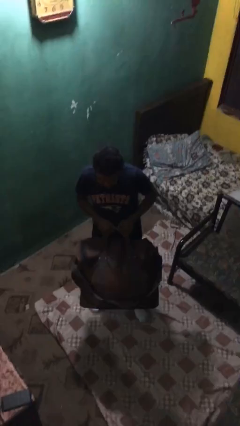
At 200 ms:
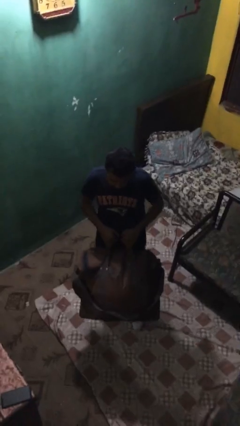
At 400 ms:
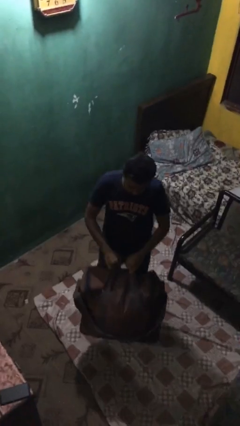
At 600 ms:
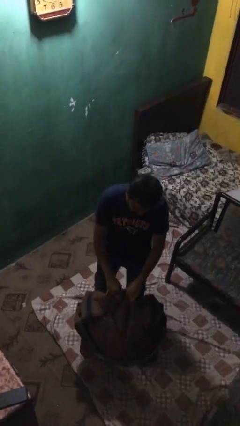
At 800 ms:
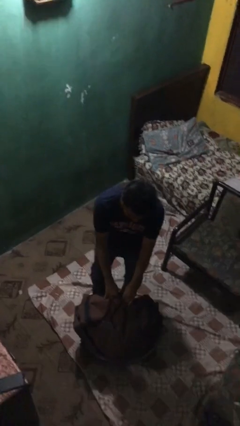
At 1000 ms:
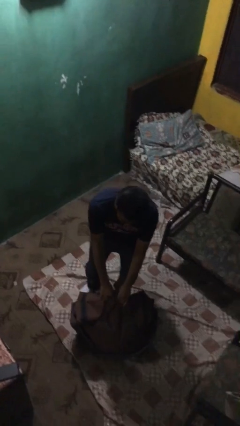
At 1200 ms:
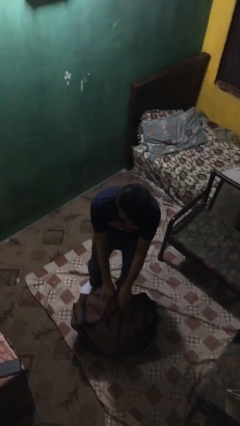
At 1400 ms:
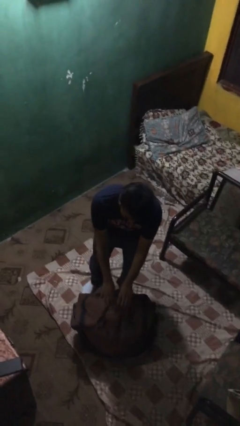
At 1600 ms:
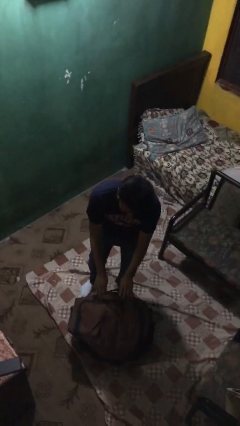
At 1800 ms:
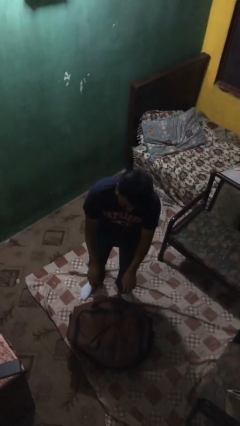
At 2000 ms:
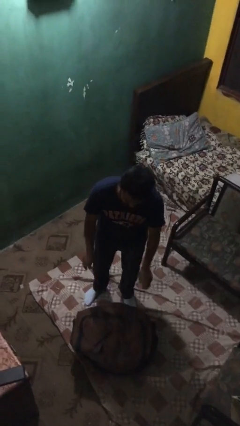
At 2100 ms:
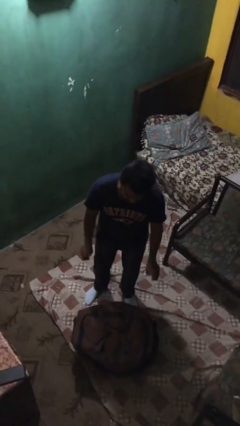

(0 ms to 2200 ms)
person puts down object on floor

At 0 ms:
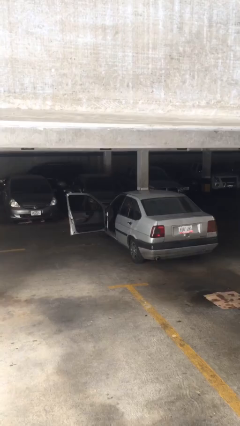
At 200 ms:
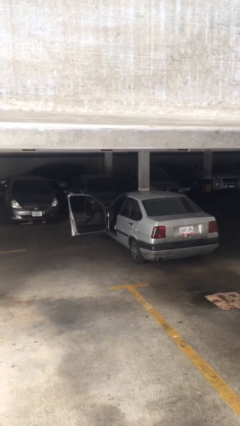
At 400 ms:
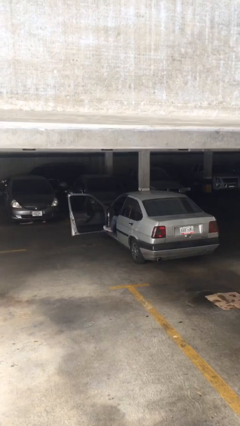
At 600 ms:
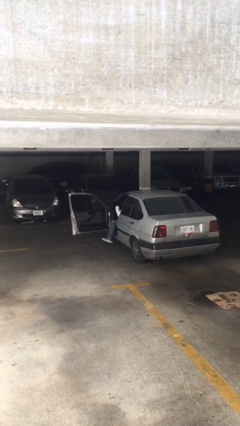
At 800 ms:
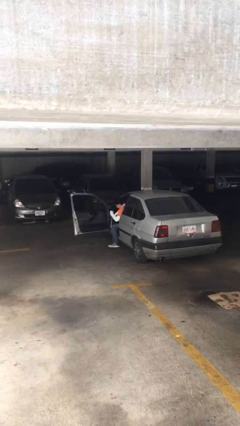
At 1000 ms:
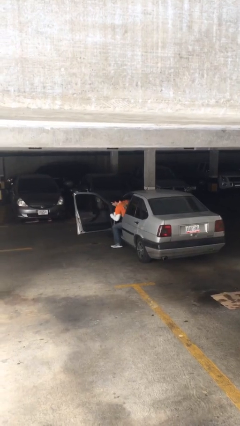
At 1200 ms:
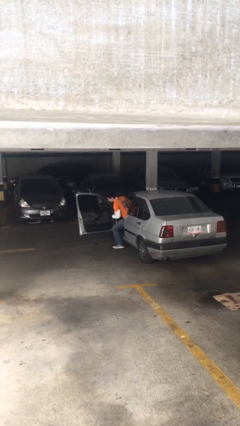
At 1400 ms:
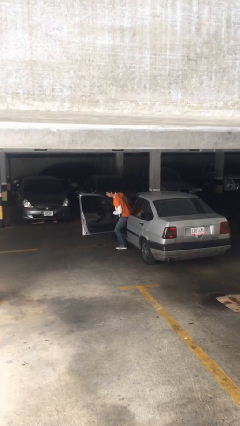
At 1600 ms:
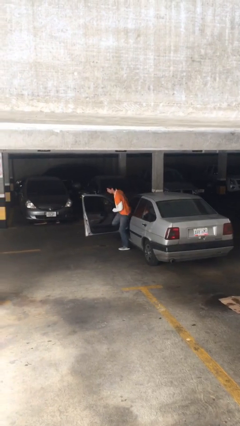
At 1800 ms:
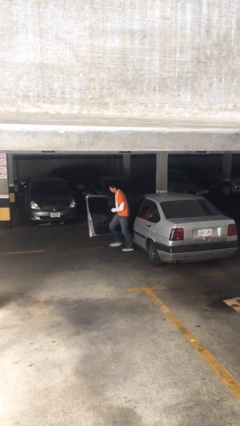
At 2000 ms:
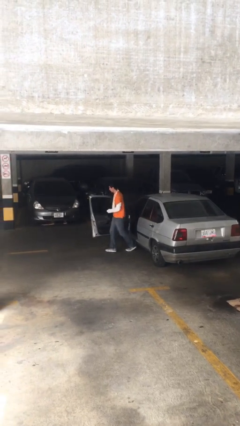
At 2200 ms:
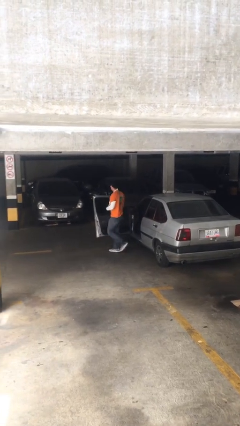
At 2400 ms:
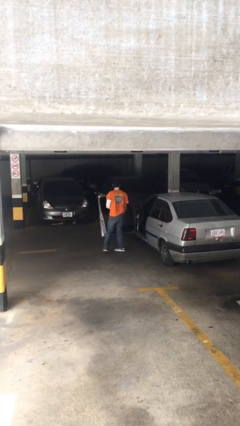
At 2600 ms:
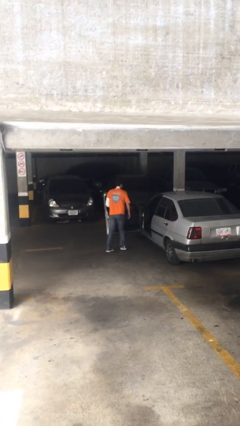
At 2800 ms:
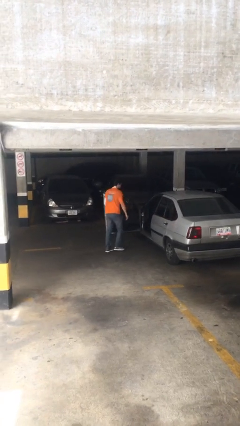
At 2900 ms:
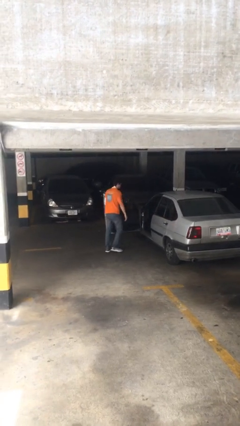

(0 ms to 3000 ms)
person exits car

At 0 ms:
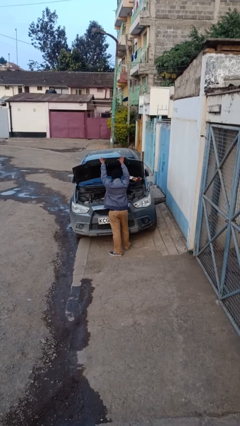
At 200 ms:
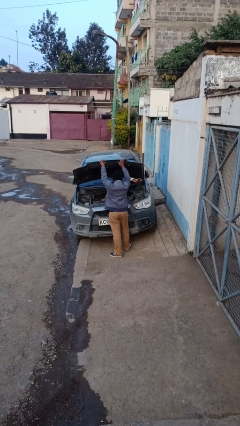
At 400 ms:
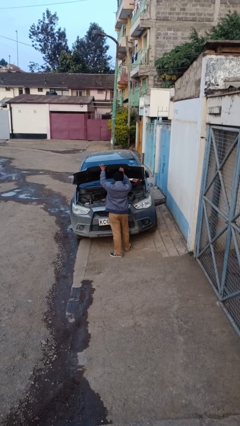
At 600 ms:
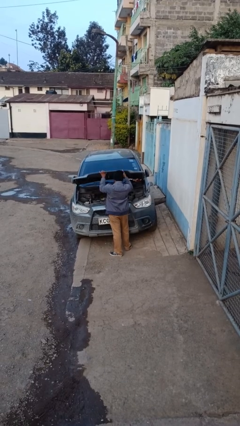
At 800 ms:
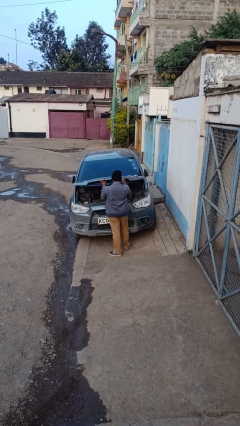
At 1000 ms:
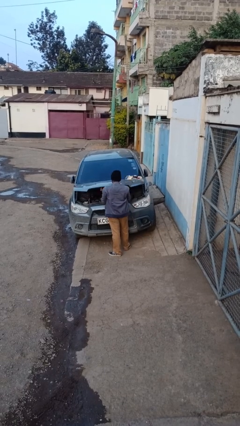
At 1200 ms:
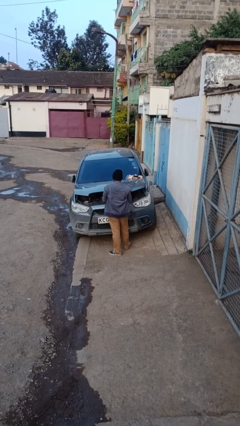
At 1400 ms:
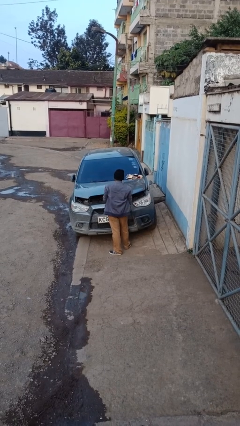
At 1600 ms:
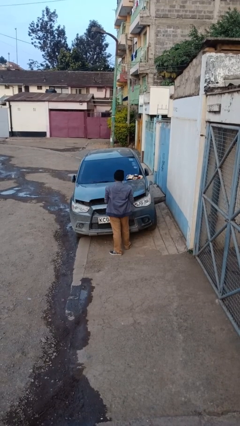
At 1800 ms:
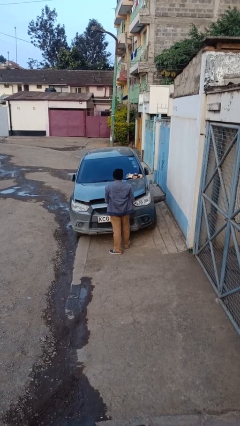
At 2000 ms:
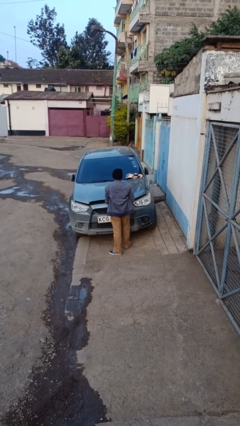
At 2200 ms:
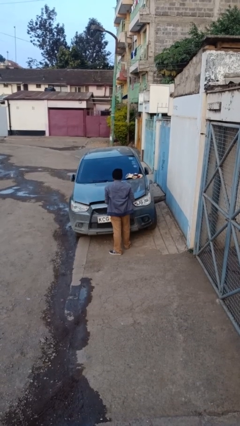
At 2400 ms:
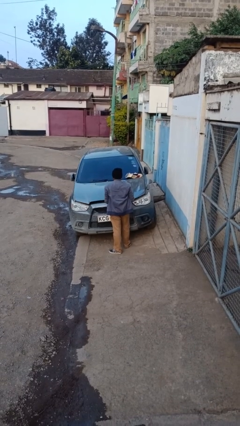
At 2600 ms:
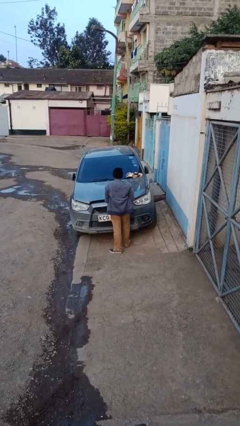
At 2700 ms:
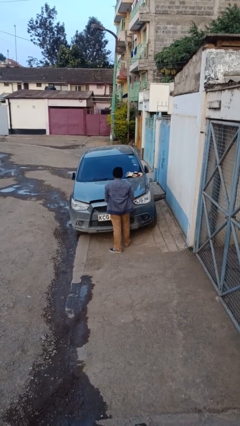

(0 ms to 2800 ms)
person closes car hood

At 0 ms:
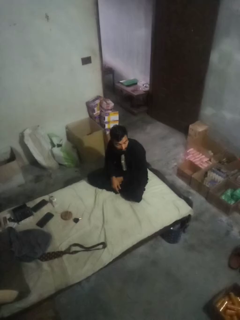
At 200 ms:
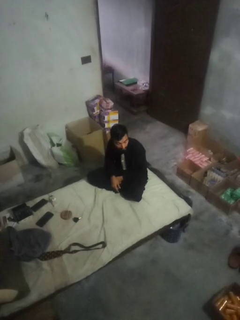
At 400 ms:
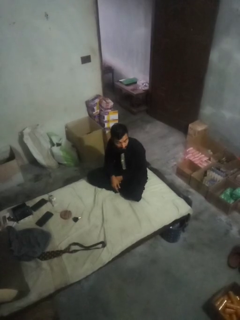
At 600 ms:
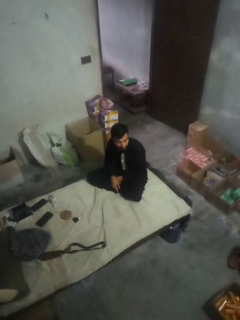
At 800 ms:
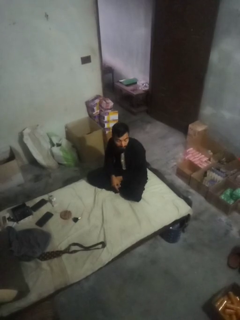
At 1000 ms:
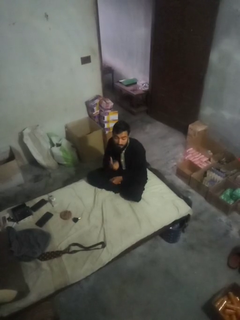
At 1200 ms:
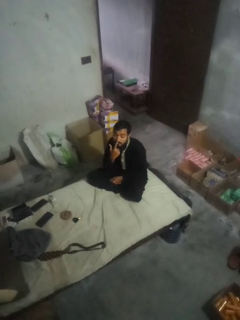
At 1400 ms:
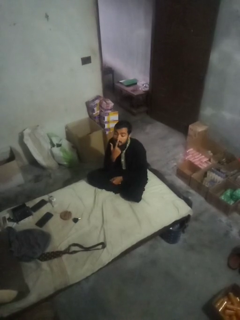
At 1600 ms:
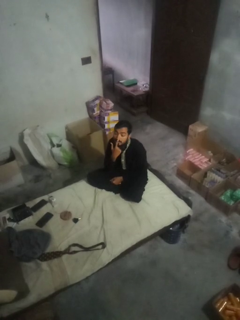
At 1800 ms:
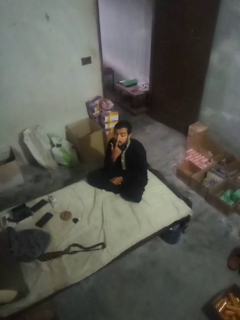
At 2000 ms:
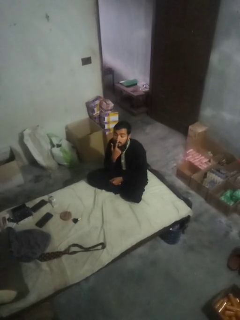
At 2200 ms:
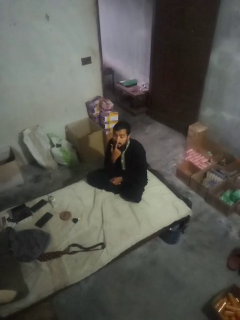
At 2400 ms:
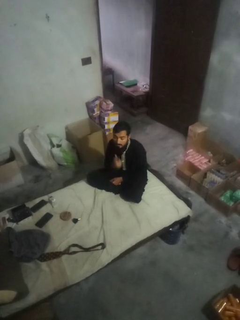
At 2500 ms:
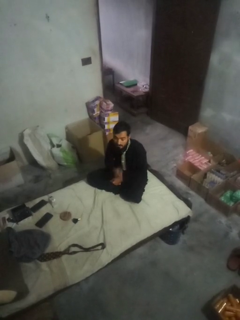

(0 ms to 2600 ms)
person gestures be quiet

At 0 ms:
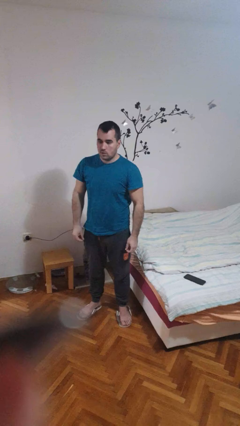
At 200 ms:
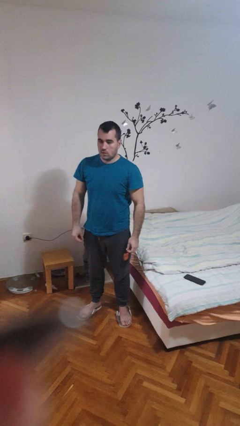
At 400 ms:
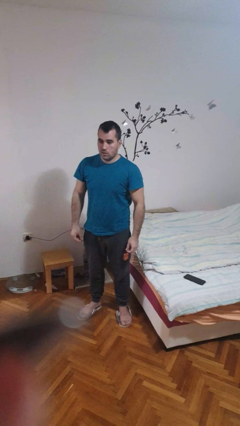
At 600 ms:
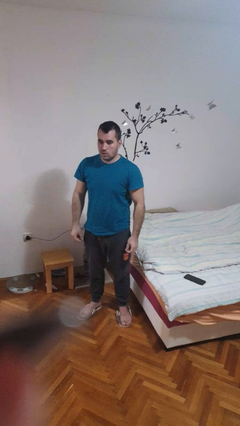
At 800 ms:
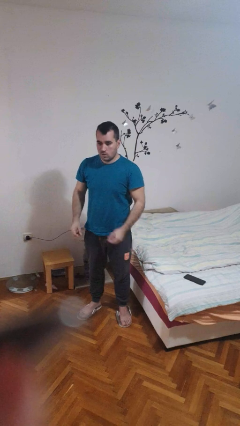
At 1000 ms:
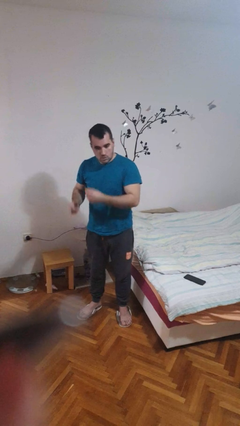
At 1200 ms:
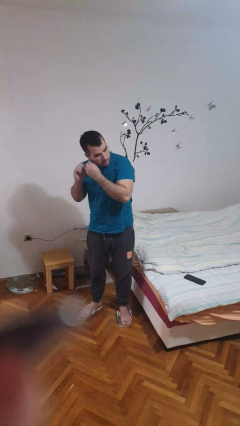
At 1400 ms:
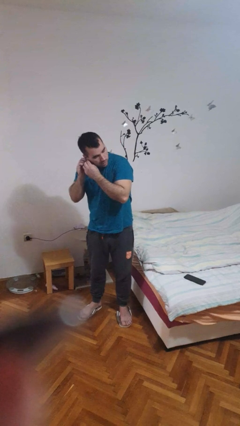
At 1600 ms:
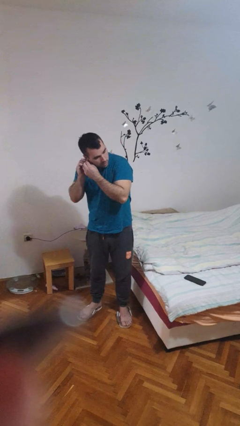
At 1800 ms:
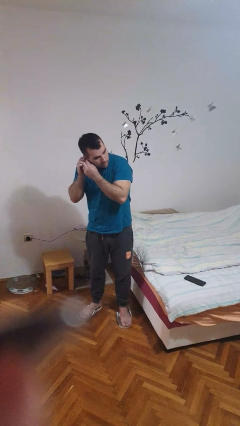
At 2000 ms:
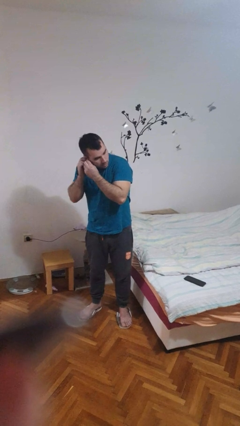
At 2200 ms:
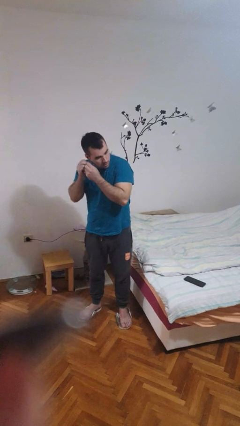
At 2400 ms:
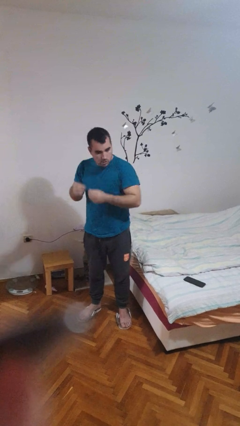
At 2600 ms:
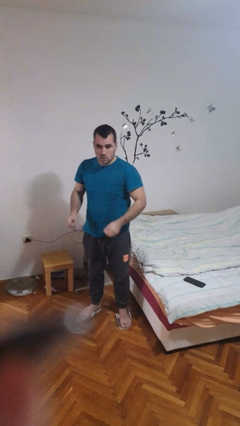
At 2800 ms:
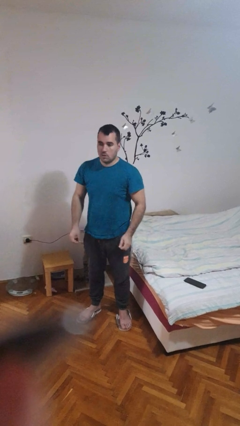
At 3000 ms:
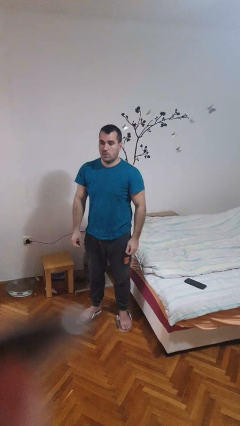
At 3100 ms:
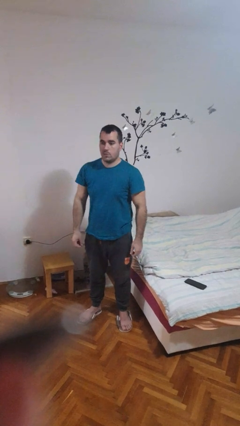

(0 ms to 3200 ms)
person takes off earrings

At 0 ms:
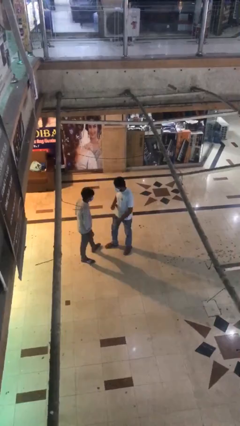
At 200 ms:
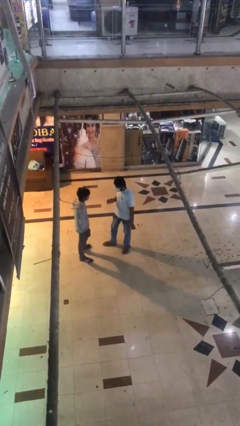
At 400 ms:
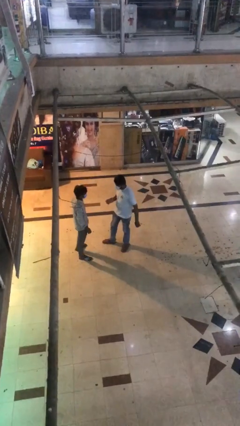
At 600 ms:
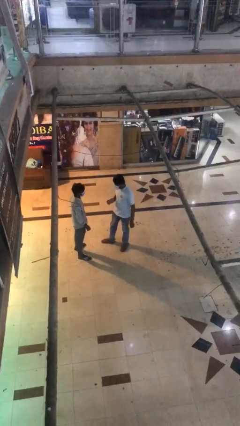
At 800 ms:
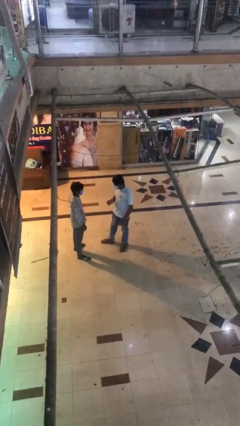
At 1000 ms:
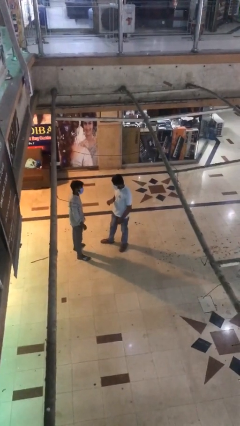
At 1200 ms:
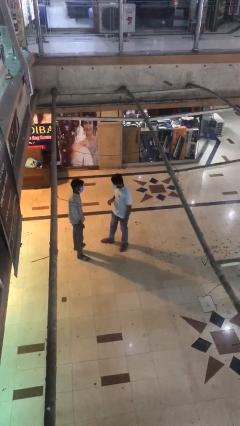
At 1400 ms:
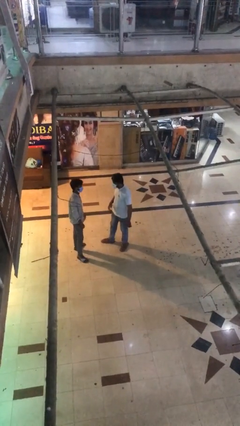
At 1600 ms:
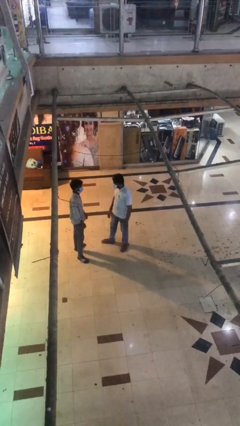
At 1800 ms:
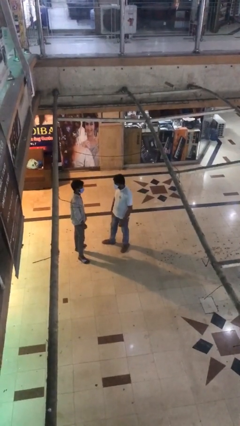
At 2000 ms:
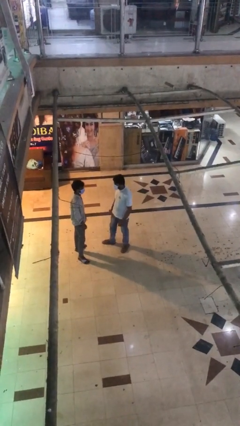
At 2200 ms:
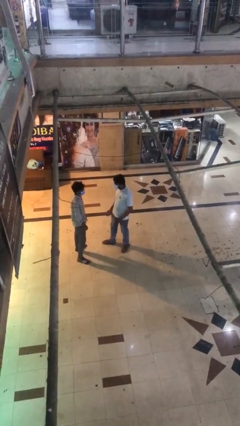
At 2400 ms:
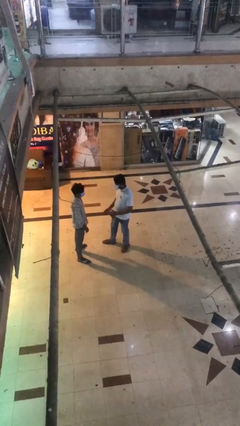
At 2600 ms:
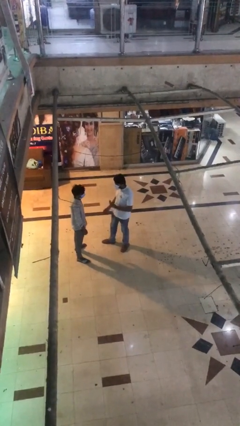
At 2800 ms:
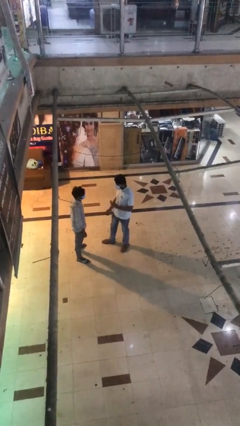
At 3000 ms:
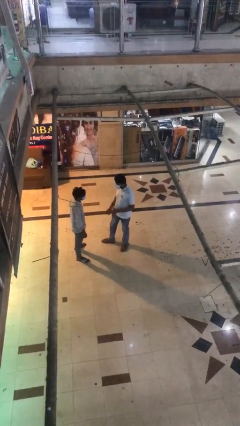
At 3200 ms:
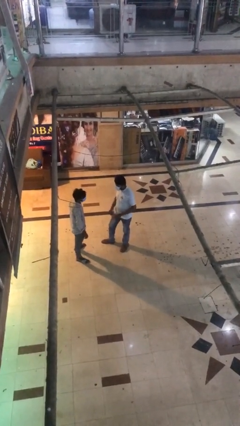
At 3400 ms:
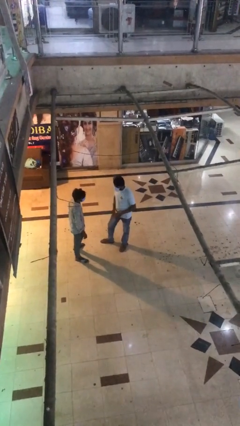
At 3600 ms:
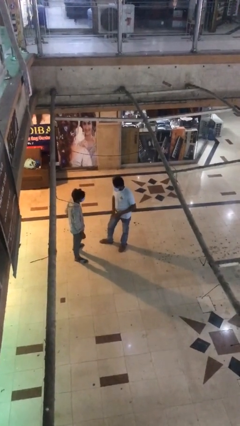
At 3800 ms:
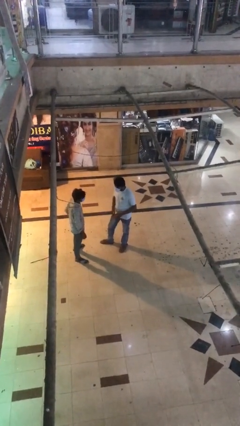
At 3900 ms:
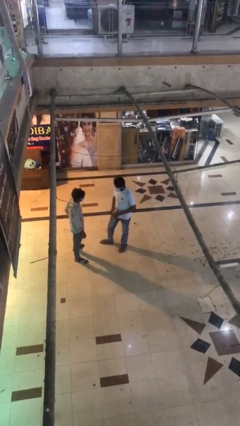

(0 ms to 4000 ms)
person talks to person

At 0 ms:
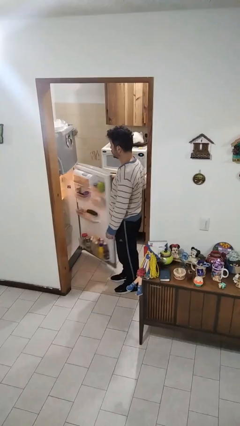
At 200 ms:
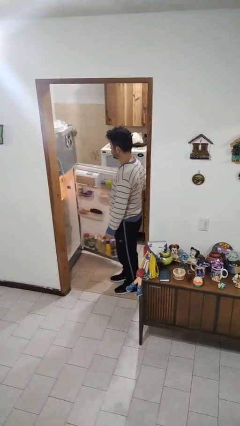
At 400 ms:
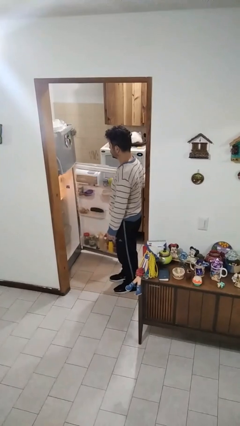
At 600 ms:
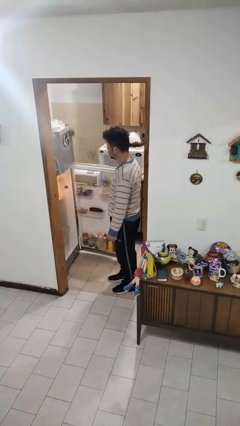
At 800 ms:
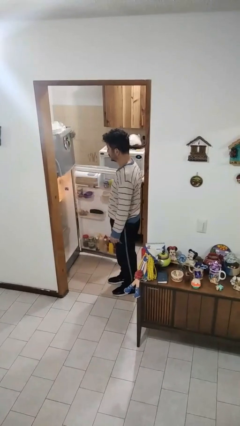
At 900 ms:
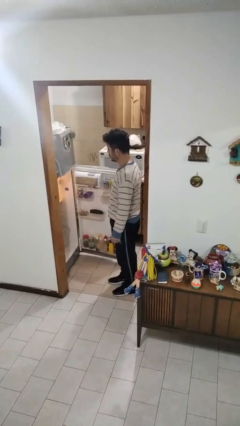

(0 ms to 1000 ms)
person opens refrigerator